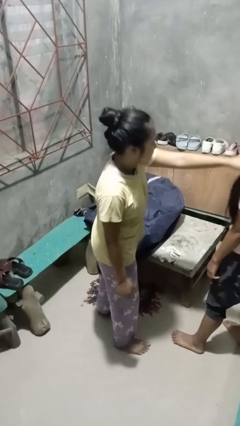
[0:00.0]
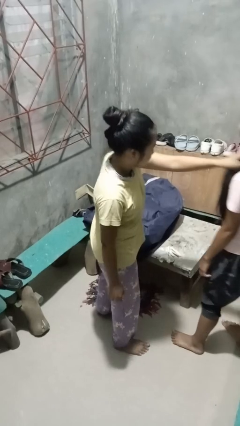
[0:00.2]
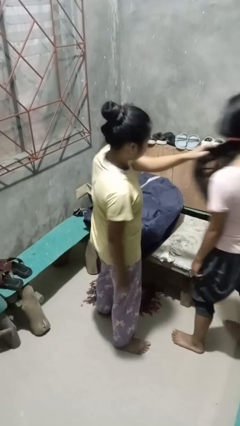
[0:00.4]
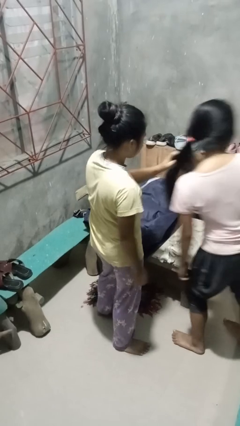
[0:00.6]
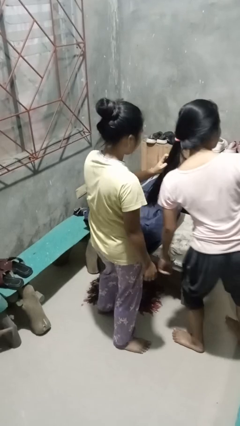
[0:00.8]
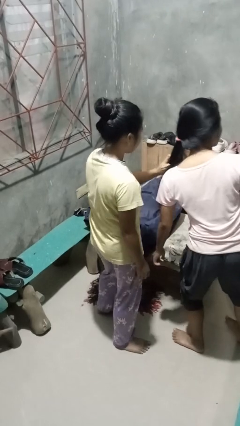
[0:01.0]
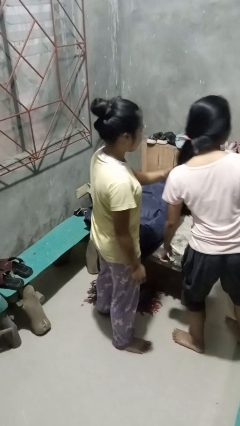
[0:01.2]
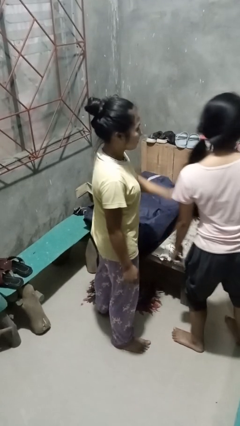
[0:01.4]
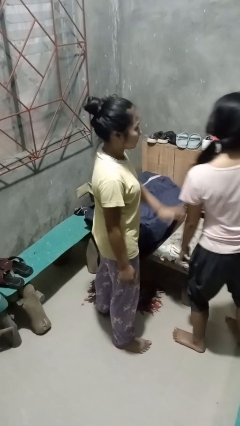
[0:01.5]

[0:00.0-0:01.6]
person grabs person by hair

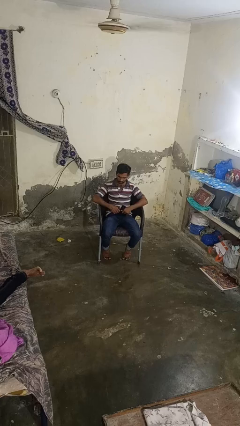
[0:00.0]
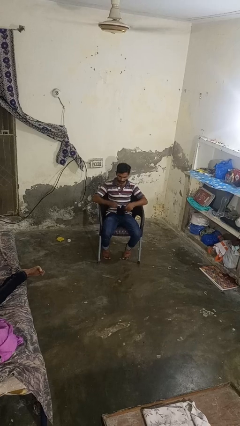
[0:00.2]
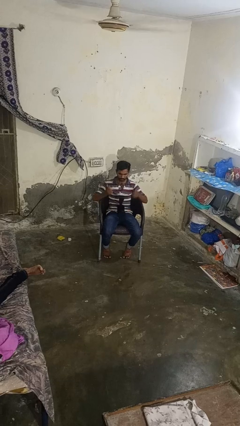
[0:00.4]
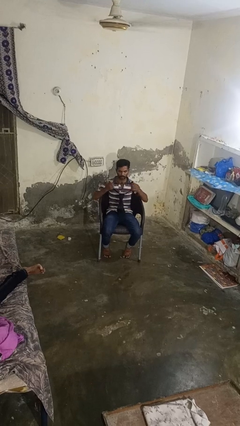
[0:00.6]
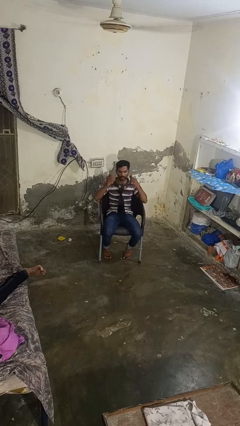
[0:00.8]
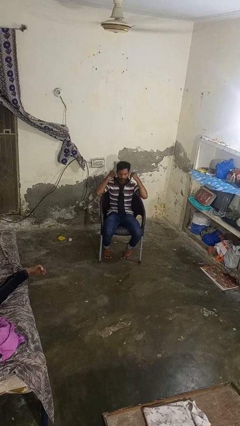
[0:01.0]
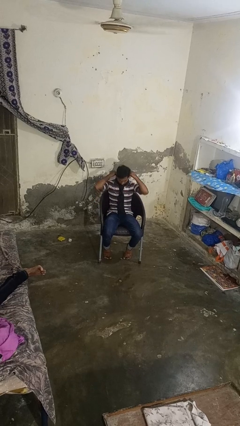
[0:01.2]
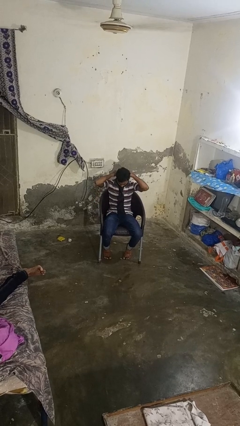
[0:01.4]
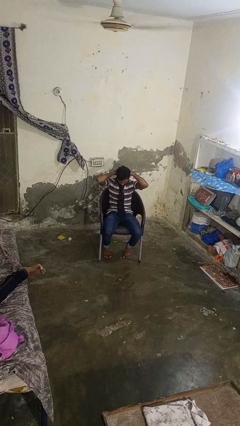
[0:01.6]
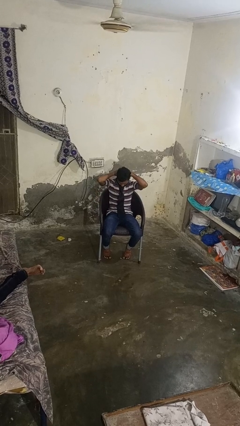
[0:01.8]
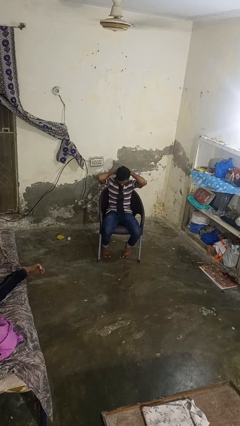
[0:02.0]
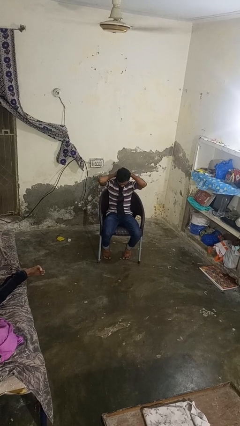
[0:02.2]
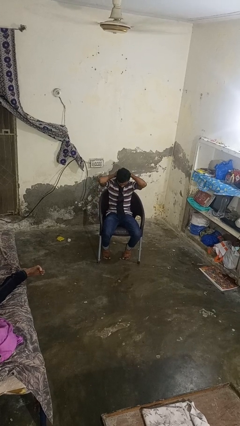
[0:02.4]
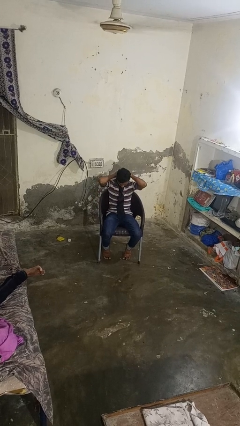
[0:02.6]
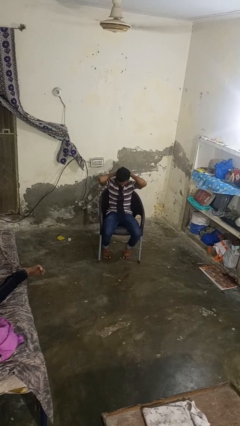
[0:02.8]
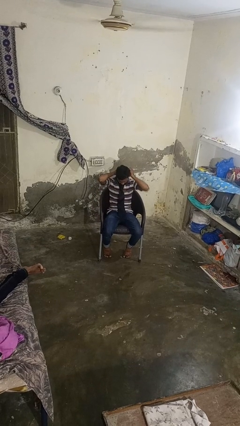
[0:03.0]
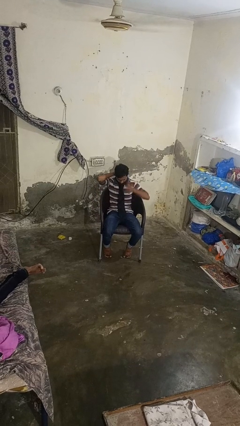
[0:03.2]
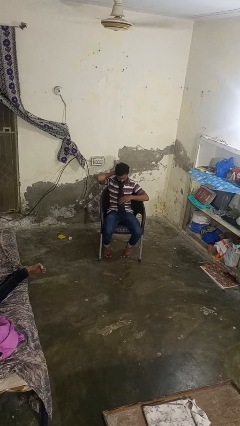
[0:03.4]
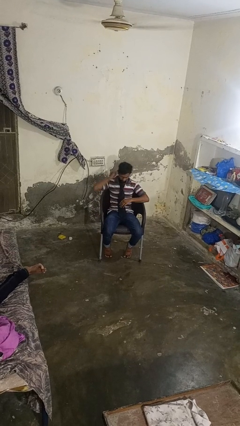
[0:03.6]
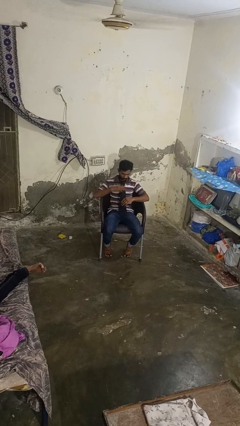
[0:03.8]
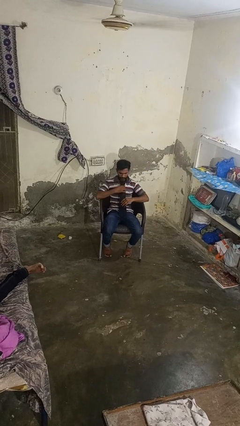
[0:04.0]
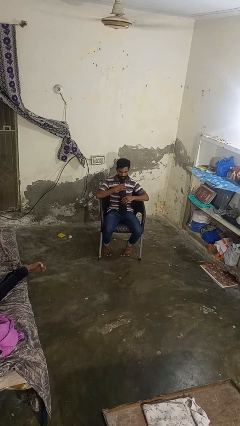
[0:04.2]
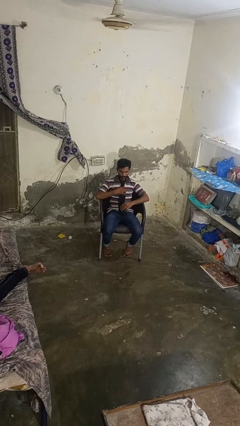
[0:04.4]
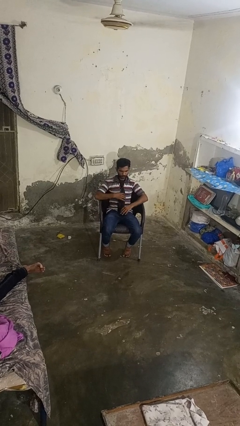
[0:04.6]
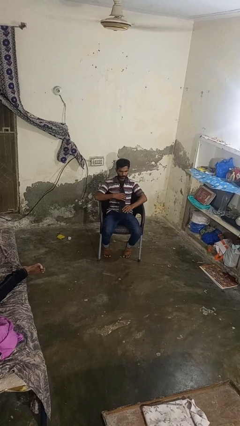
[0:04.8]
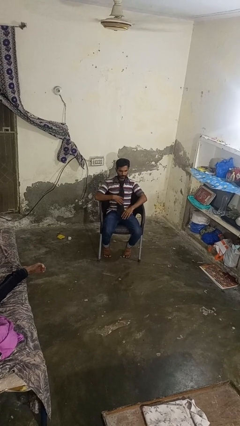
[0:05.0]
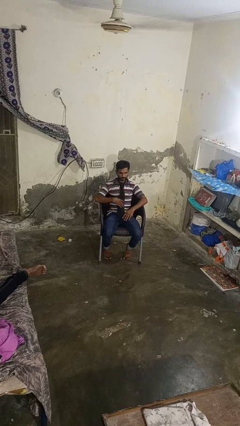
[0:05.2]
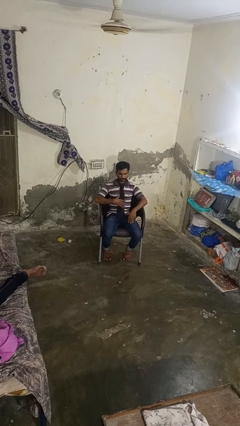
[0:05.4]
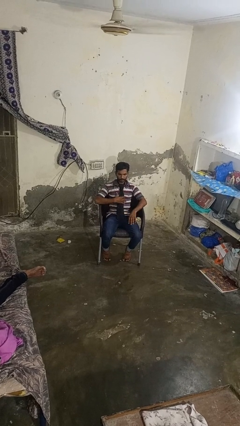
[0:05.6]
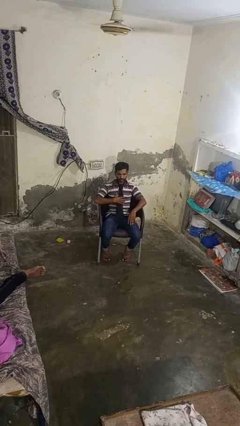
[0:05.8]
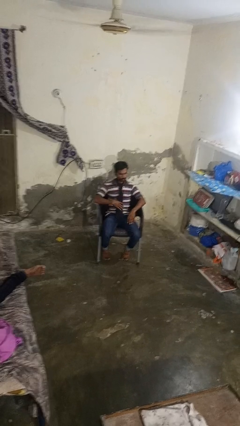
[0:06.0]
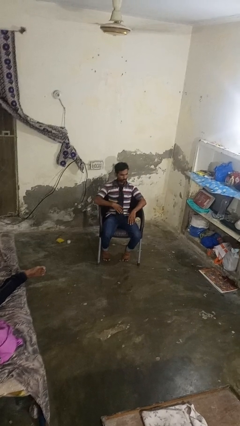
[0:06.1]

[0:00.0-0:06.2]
person puts on necktie

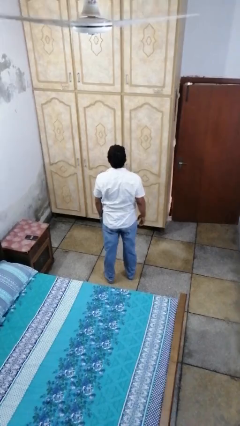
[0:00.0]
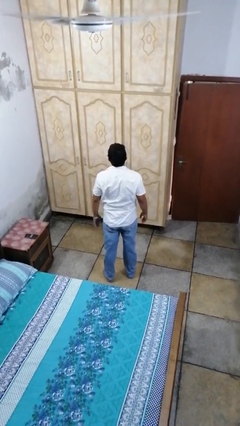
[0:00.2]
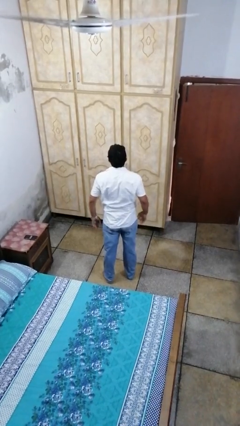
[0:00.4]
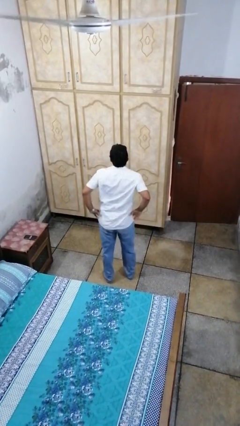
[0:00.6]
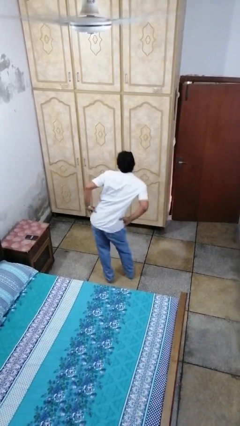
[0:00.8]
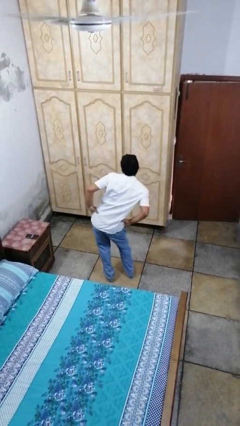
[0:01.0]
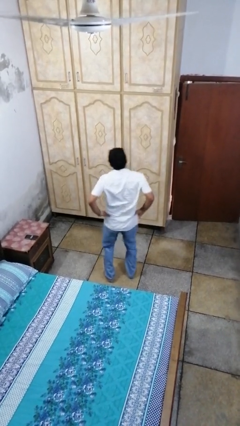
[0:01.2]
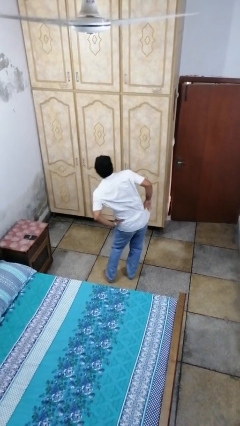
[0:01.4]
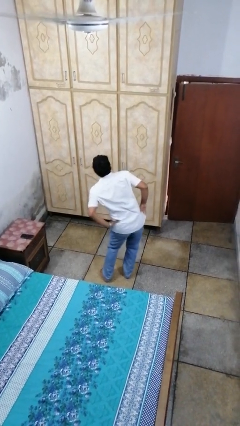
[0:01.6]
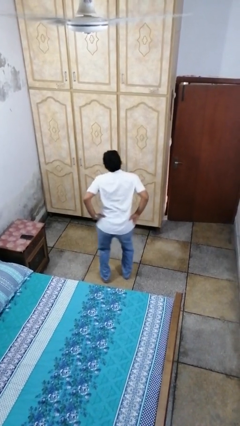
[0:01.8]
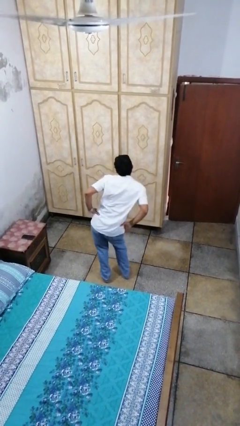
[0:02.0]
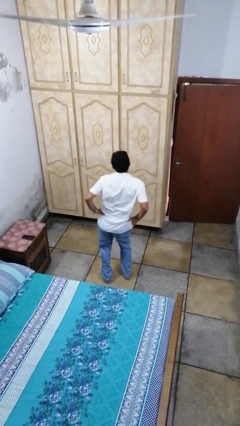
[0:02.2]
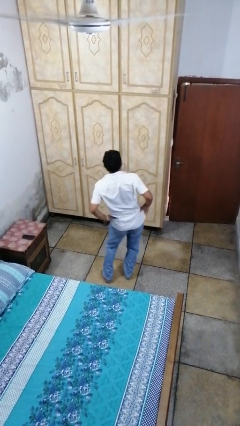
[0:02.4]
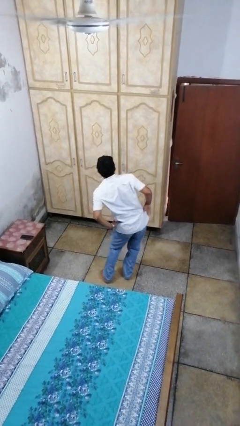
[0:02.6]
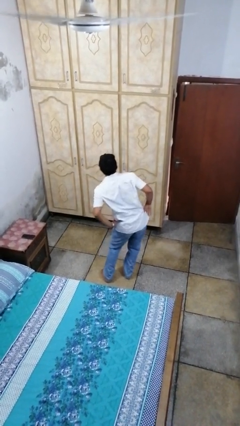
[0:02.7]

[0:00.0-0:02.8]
person wiggles hips

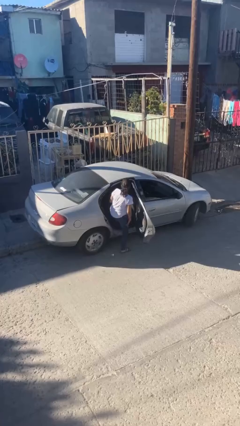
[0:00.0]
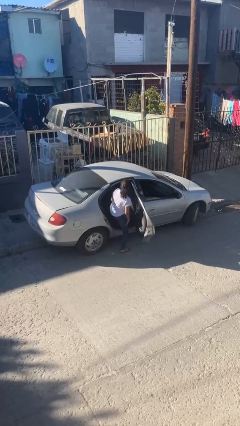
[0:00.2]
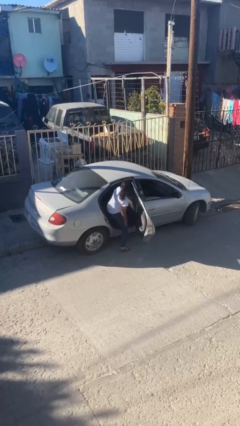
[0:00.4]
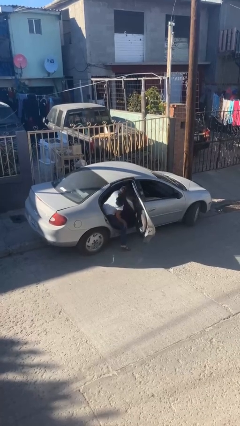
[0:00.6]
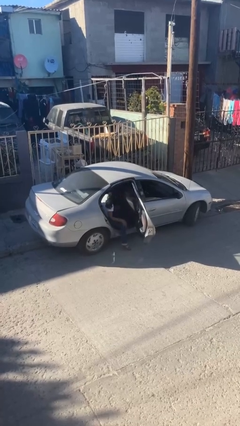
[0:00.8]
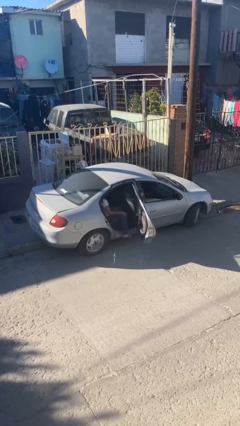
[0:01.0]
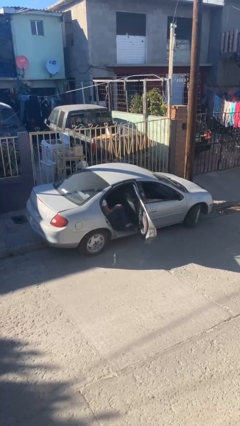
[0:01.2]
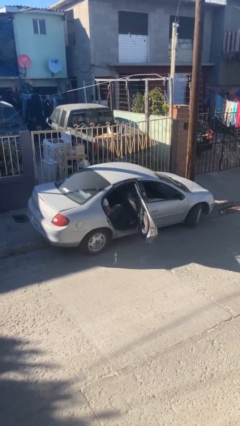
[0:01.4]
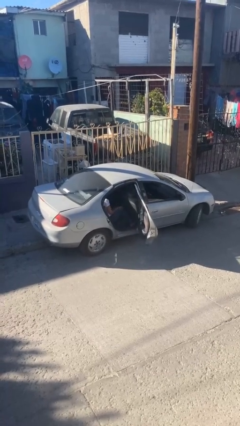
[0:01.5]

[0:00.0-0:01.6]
person enters car

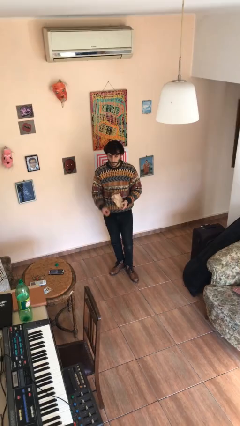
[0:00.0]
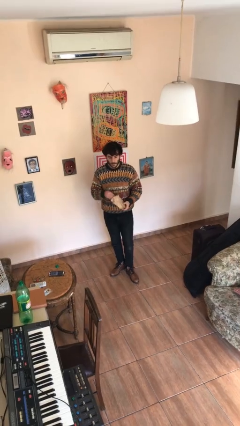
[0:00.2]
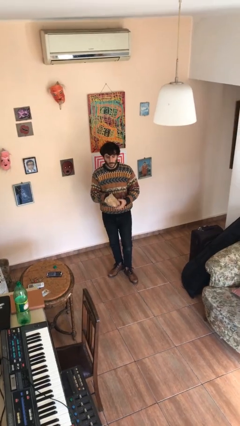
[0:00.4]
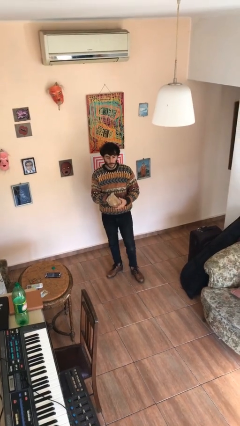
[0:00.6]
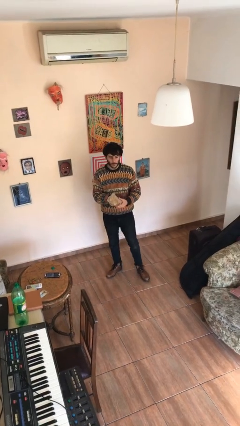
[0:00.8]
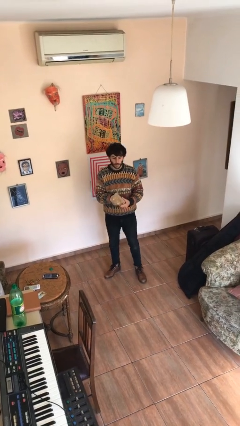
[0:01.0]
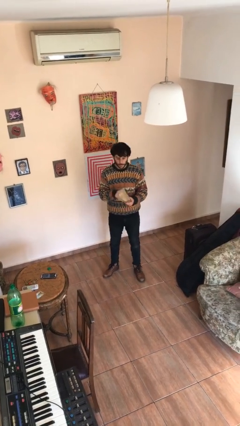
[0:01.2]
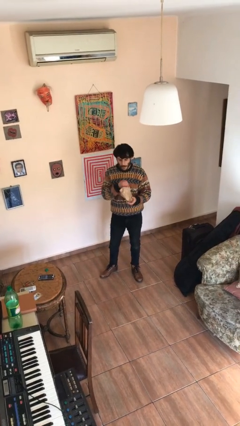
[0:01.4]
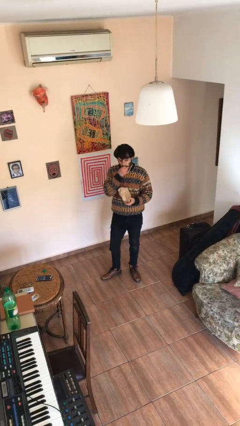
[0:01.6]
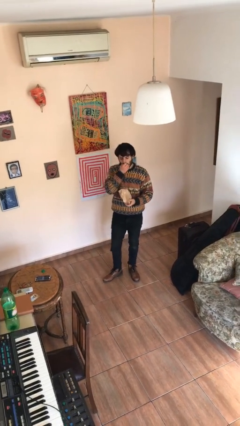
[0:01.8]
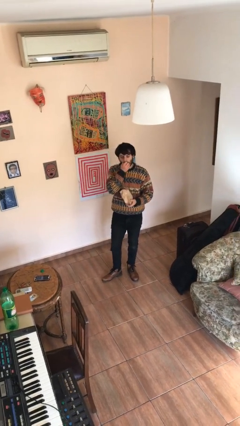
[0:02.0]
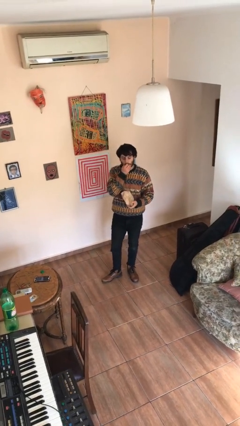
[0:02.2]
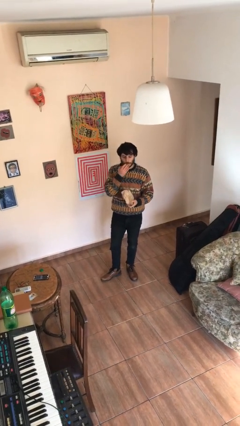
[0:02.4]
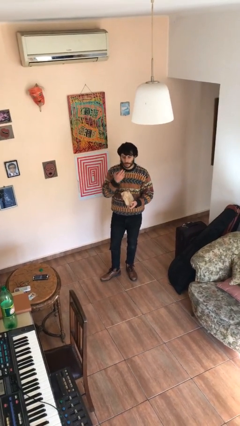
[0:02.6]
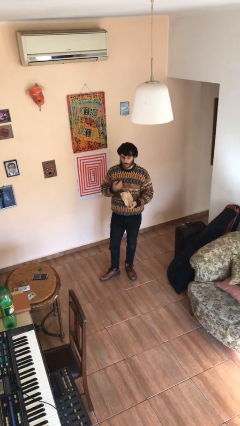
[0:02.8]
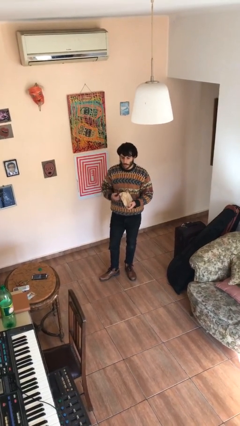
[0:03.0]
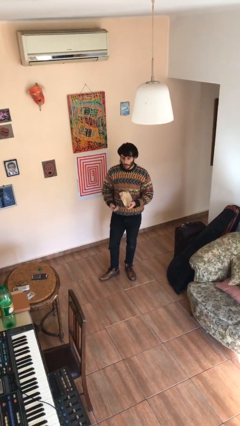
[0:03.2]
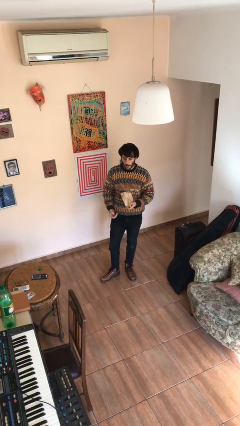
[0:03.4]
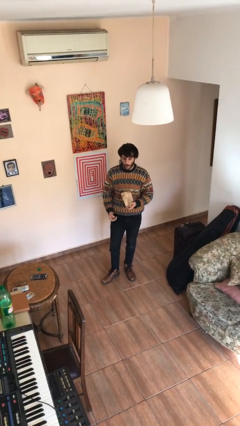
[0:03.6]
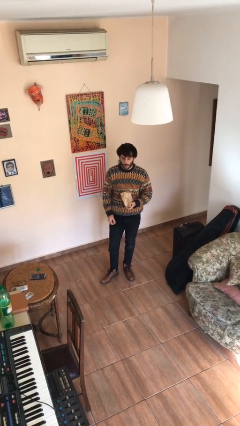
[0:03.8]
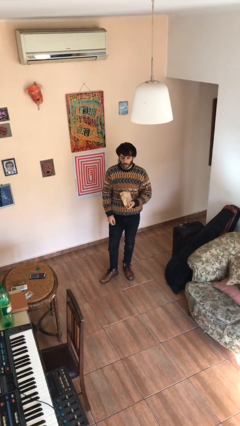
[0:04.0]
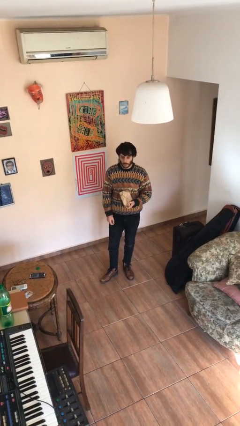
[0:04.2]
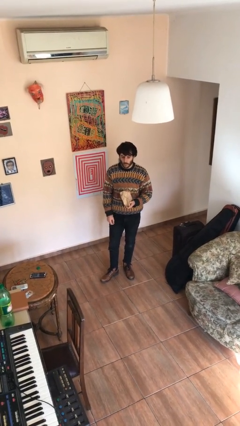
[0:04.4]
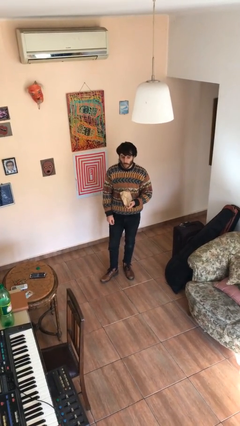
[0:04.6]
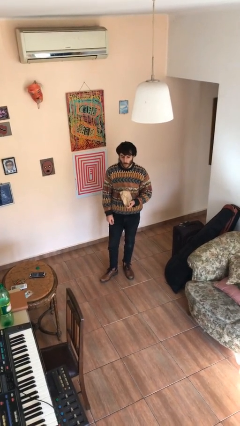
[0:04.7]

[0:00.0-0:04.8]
person eats snack from bag

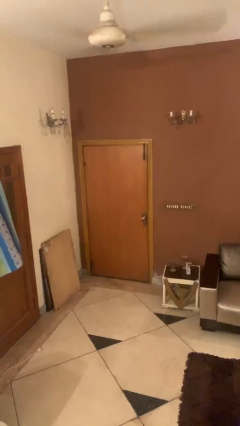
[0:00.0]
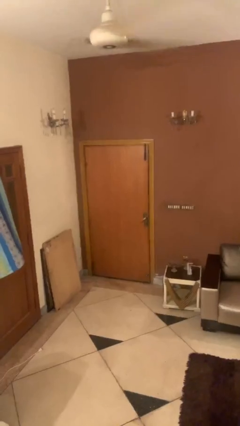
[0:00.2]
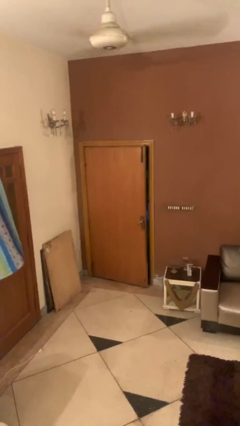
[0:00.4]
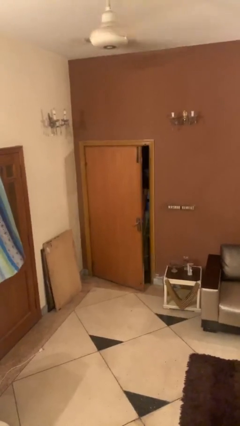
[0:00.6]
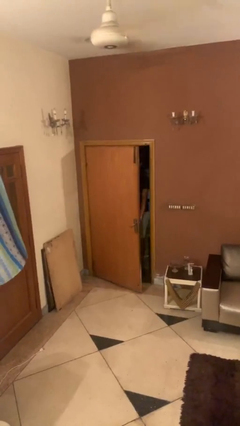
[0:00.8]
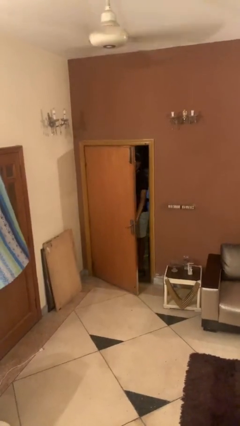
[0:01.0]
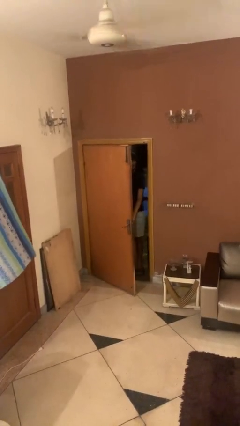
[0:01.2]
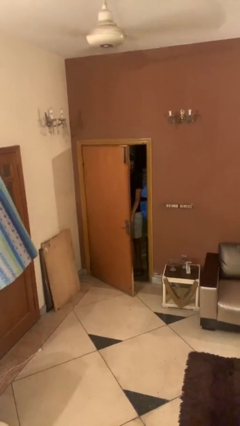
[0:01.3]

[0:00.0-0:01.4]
person opens facility door
